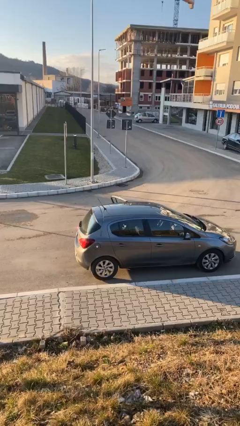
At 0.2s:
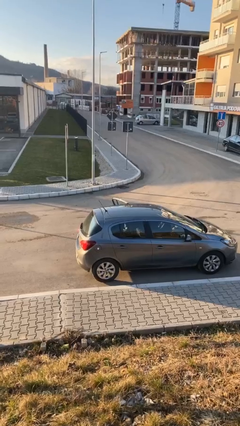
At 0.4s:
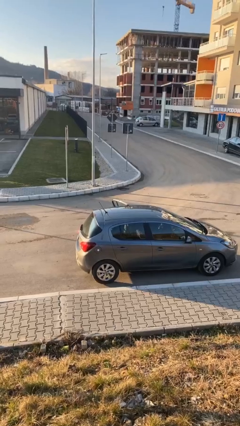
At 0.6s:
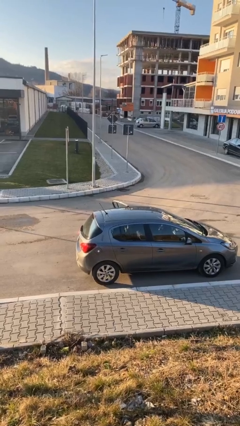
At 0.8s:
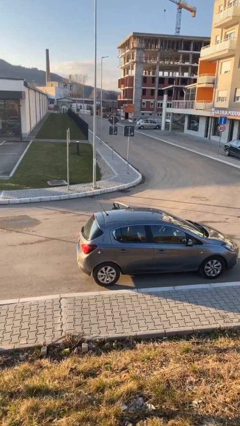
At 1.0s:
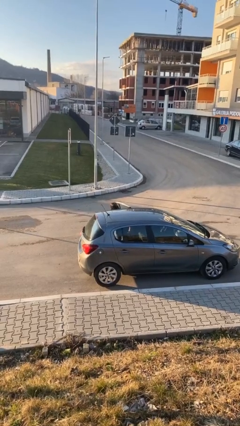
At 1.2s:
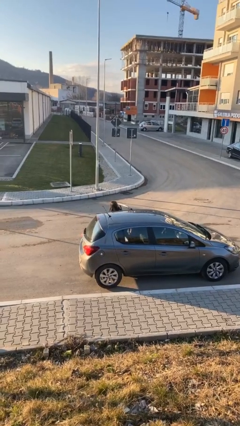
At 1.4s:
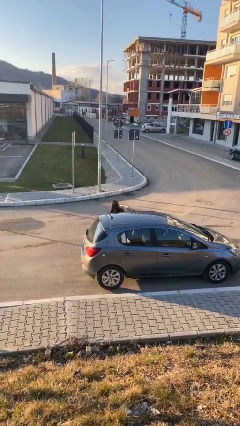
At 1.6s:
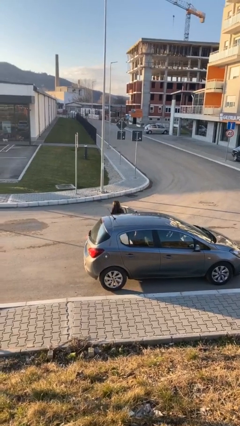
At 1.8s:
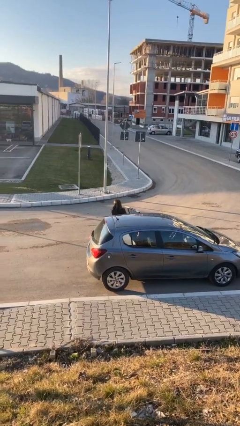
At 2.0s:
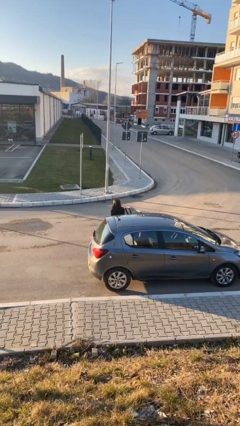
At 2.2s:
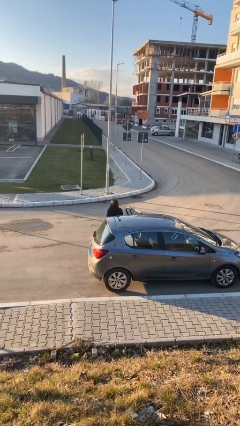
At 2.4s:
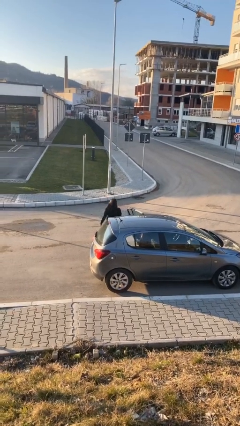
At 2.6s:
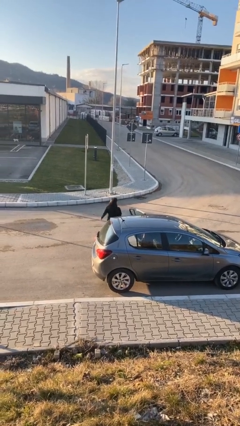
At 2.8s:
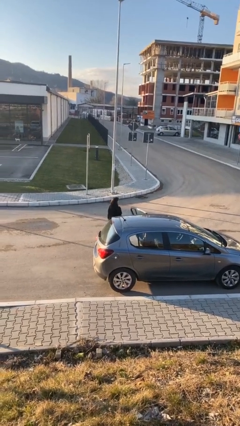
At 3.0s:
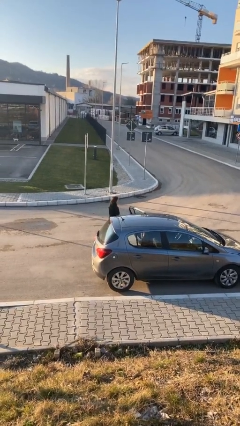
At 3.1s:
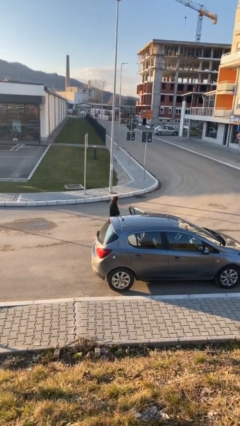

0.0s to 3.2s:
person exits car

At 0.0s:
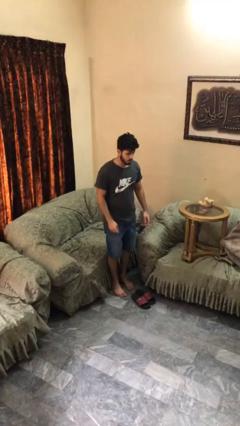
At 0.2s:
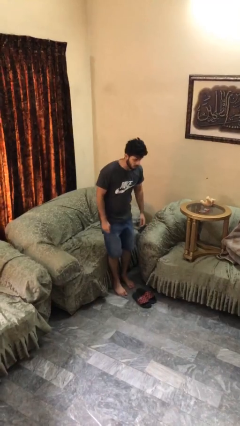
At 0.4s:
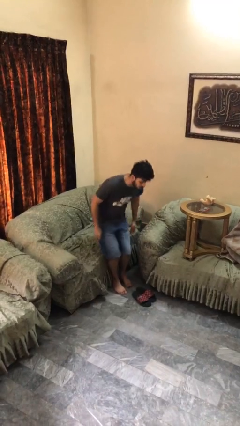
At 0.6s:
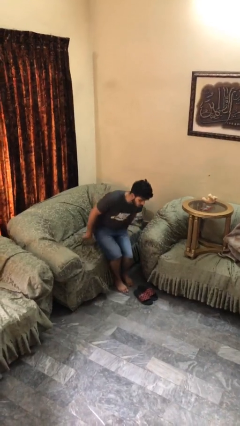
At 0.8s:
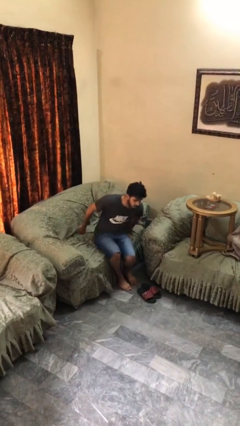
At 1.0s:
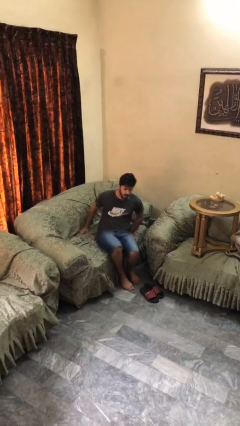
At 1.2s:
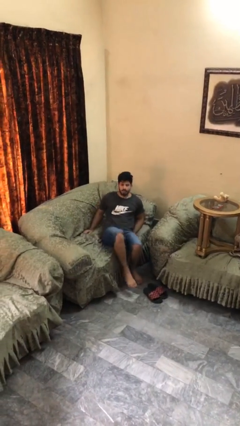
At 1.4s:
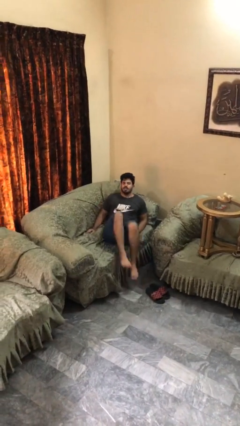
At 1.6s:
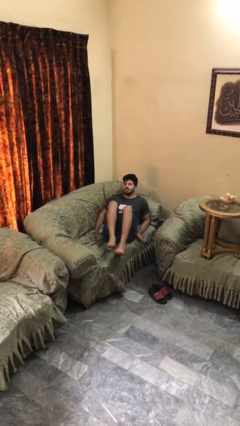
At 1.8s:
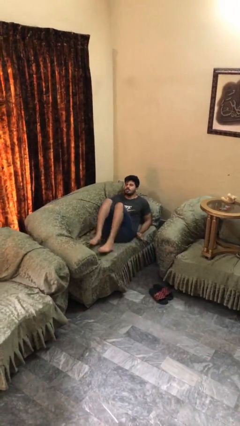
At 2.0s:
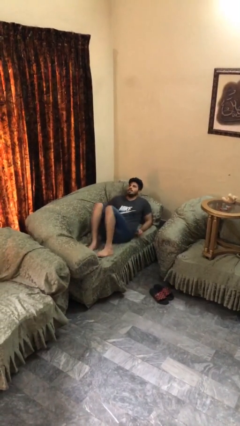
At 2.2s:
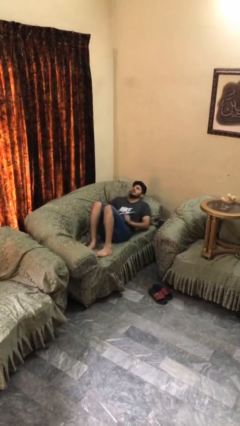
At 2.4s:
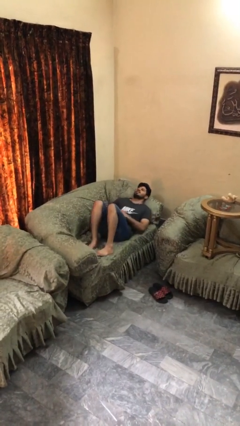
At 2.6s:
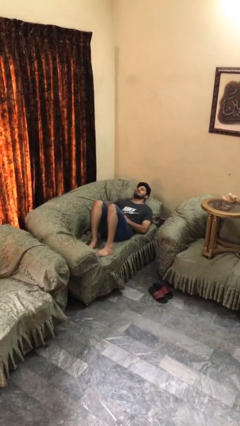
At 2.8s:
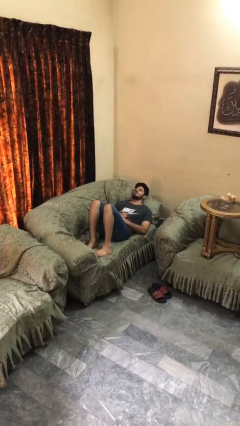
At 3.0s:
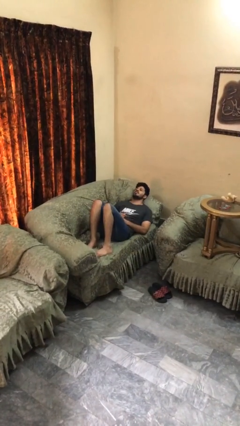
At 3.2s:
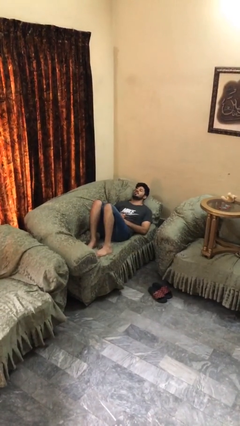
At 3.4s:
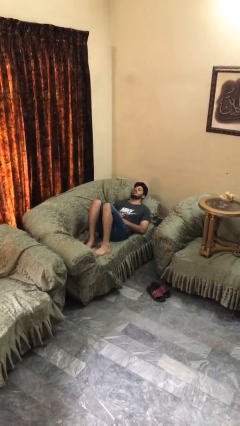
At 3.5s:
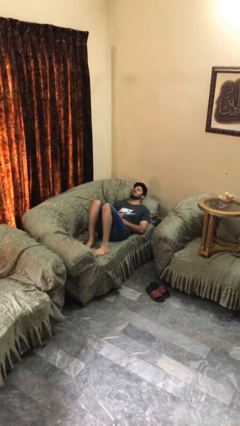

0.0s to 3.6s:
person lies down on couch

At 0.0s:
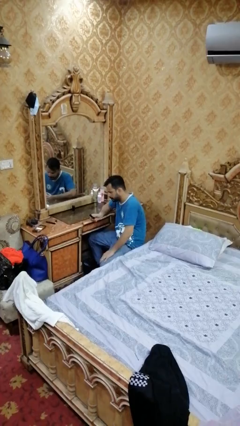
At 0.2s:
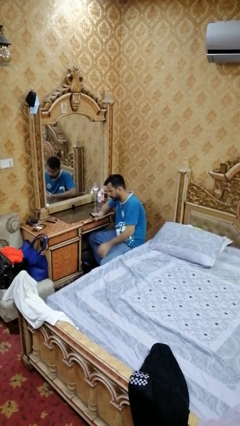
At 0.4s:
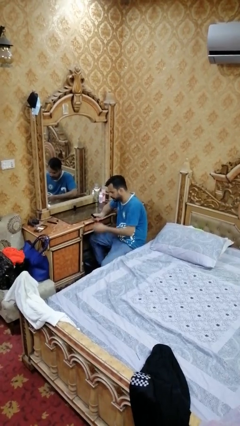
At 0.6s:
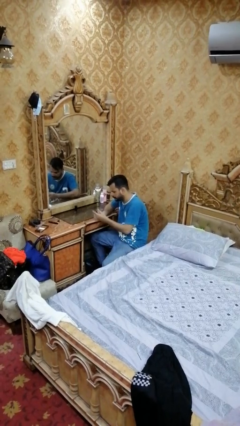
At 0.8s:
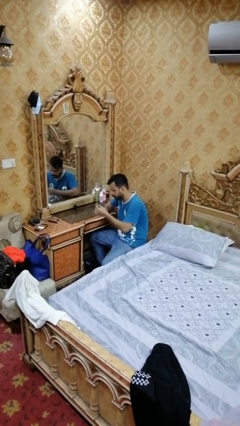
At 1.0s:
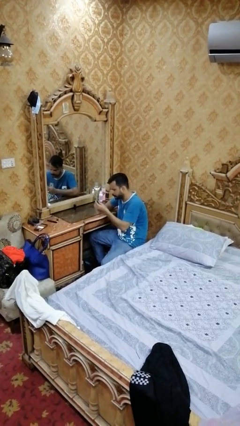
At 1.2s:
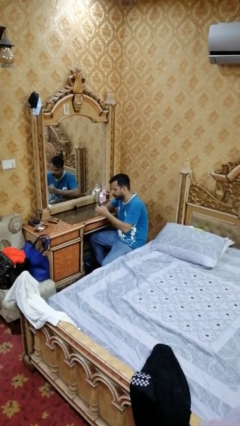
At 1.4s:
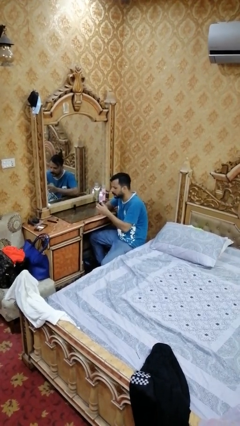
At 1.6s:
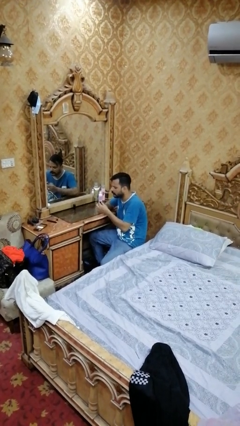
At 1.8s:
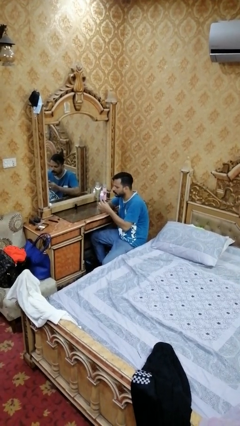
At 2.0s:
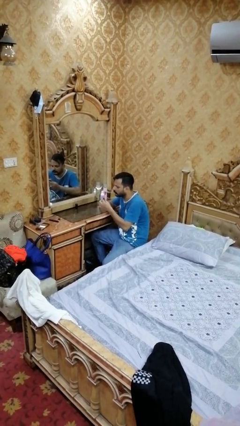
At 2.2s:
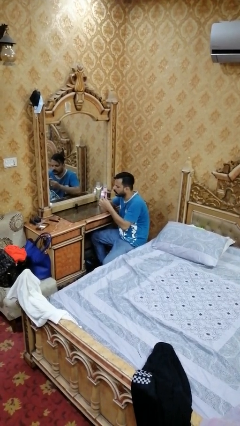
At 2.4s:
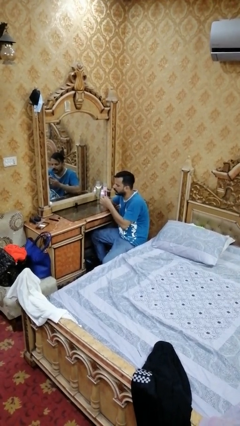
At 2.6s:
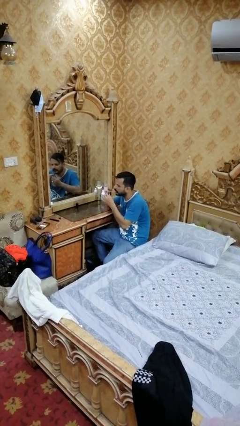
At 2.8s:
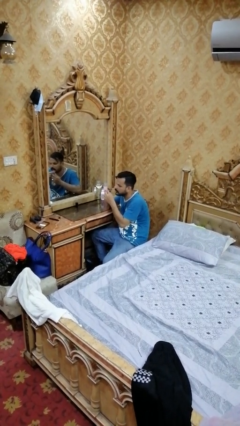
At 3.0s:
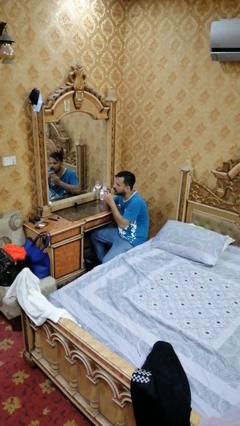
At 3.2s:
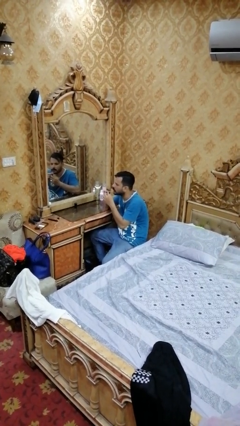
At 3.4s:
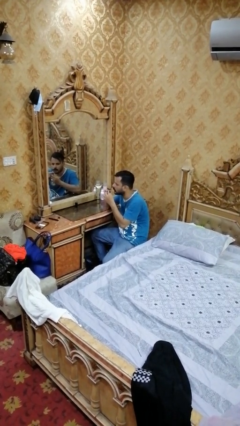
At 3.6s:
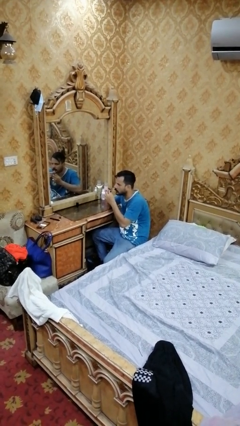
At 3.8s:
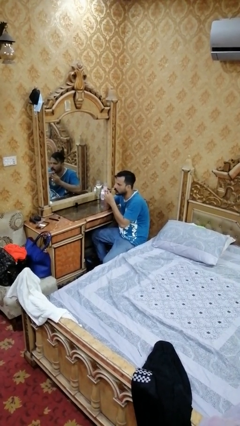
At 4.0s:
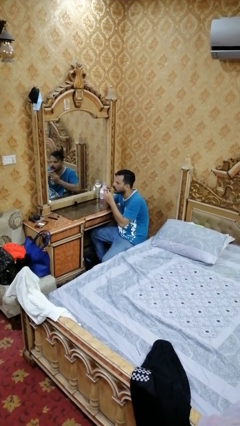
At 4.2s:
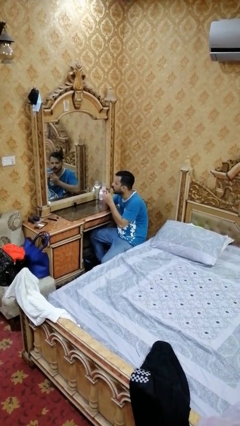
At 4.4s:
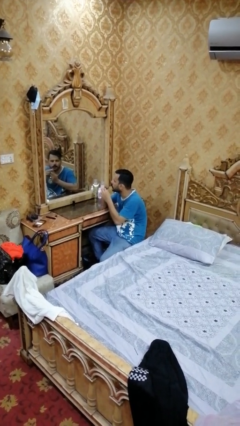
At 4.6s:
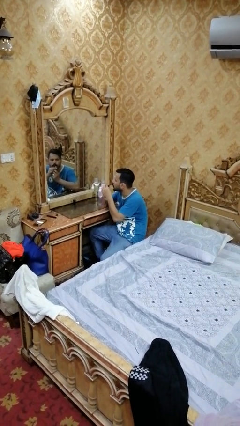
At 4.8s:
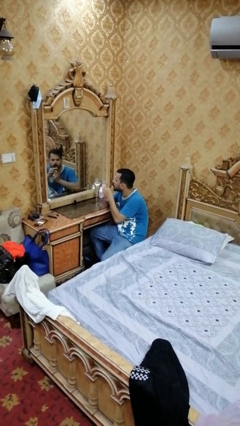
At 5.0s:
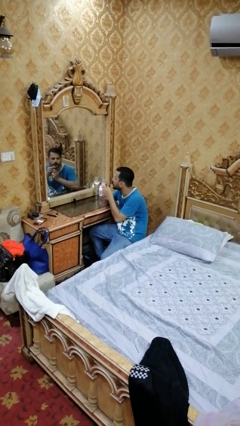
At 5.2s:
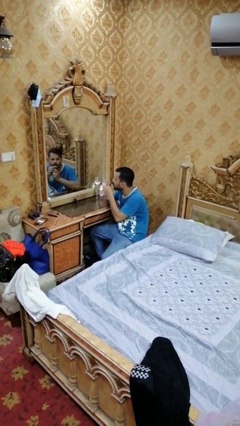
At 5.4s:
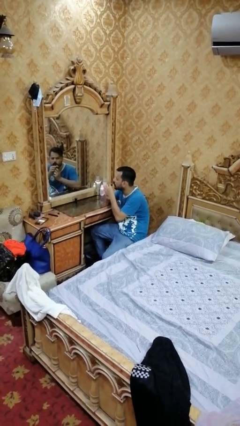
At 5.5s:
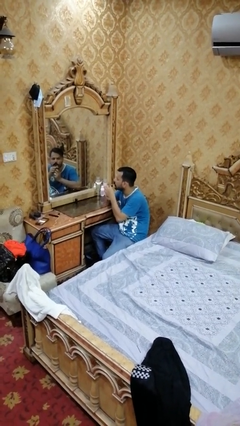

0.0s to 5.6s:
person applies lip makeup

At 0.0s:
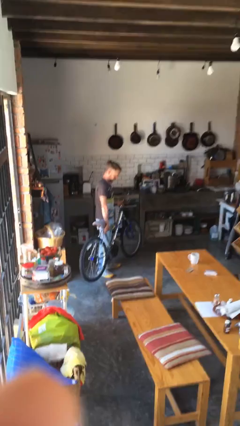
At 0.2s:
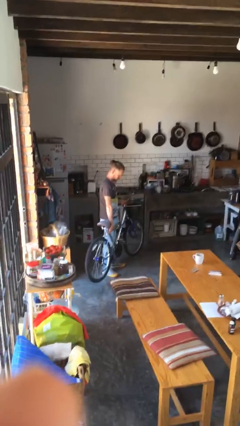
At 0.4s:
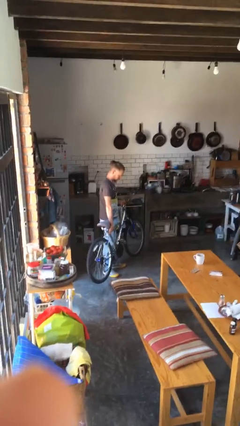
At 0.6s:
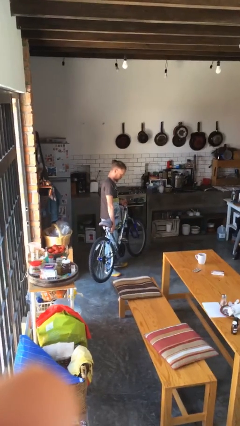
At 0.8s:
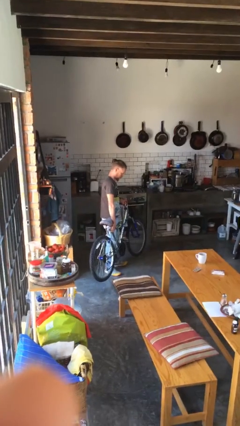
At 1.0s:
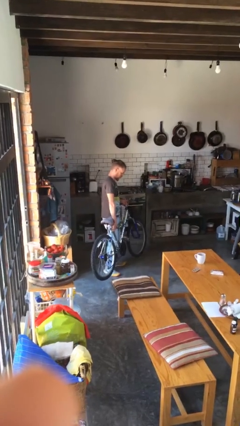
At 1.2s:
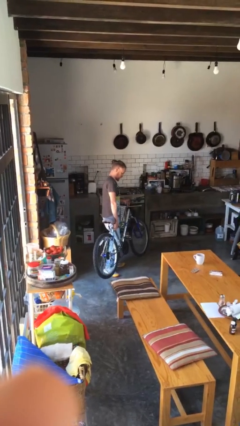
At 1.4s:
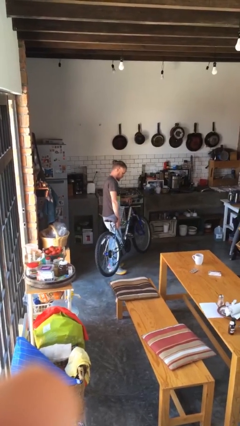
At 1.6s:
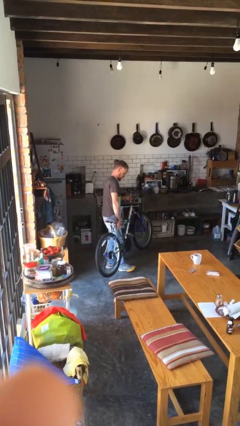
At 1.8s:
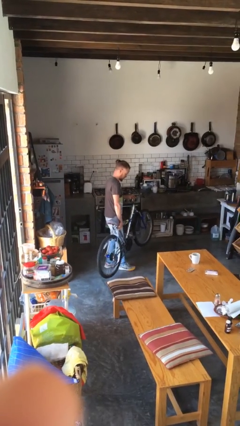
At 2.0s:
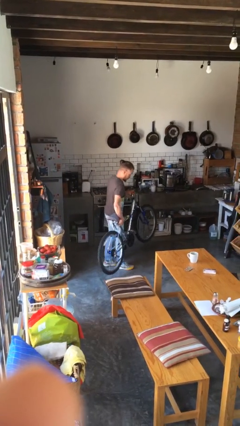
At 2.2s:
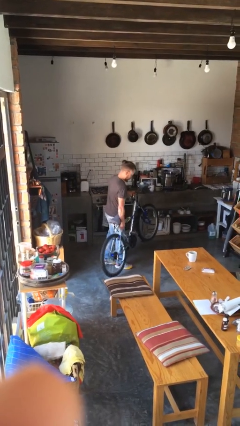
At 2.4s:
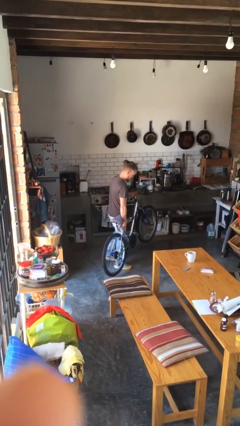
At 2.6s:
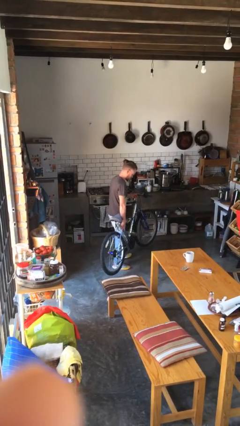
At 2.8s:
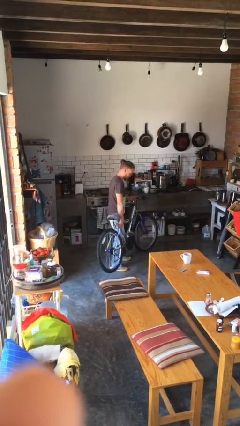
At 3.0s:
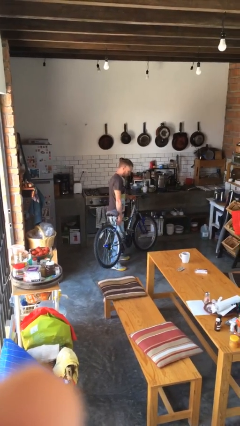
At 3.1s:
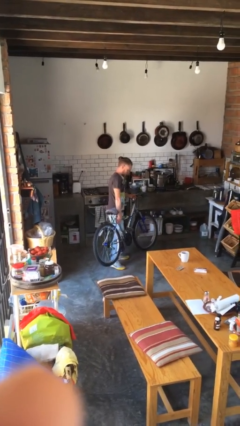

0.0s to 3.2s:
person carries bicycle

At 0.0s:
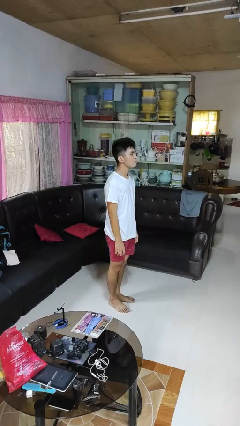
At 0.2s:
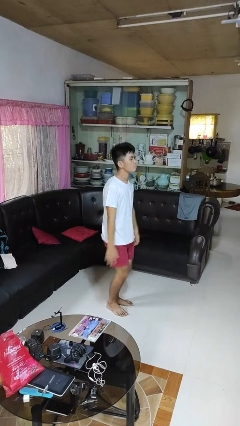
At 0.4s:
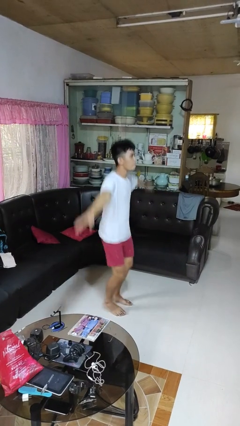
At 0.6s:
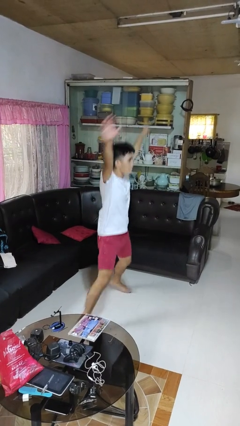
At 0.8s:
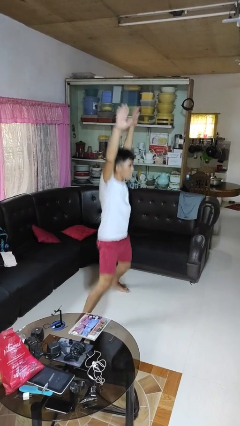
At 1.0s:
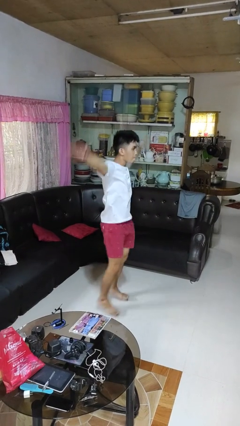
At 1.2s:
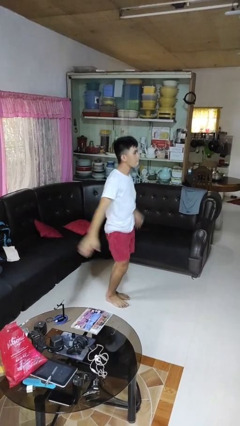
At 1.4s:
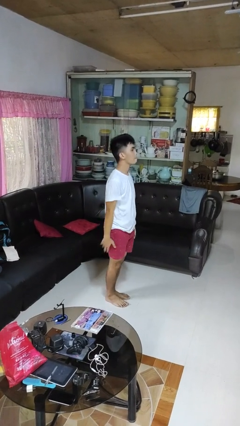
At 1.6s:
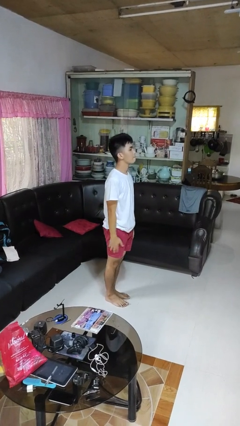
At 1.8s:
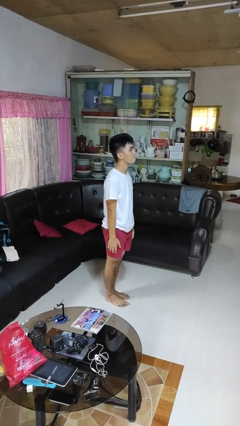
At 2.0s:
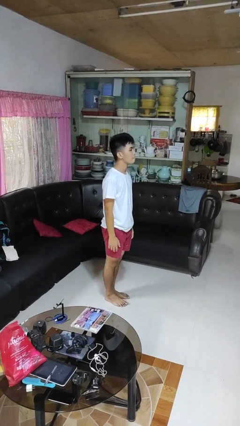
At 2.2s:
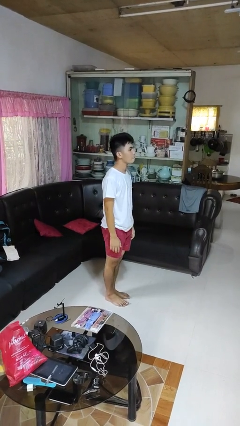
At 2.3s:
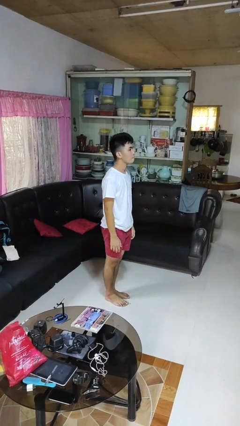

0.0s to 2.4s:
person exercises with jumping jacks
